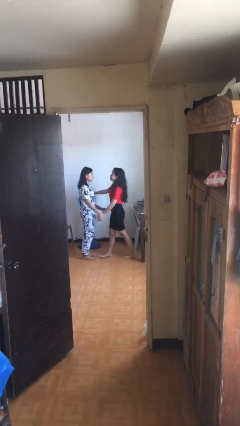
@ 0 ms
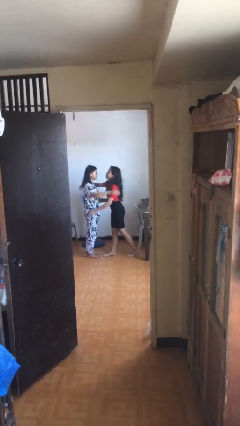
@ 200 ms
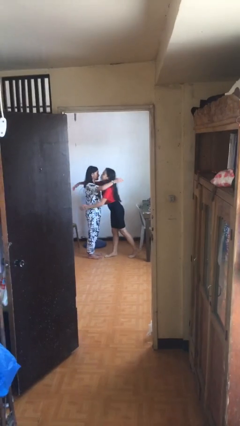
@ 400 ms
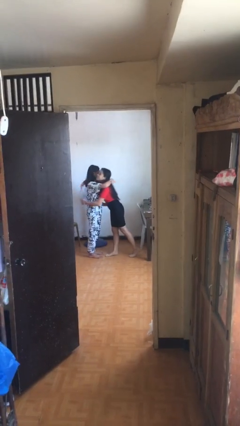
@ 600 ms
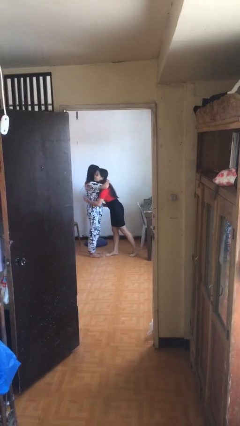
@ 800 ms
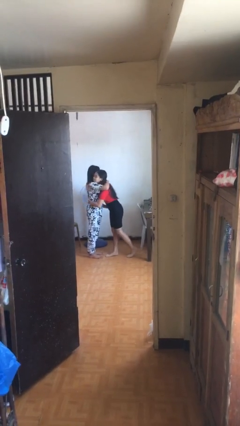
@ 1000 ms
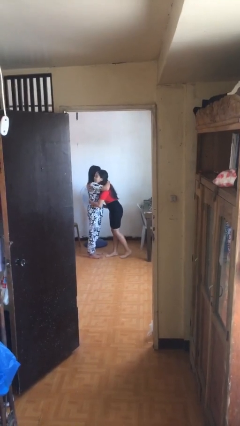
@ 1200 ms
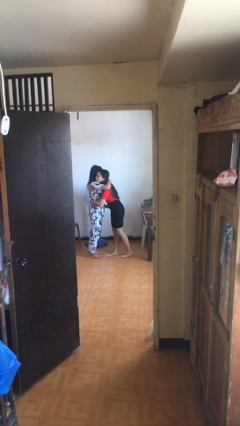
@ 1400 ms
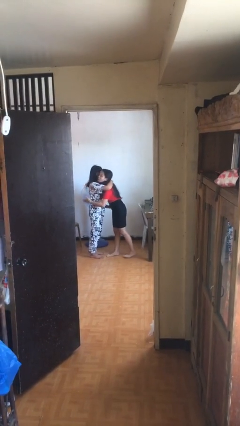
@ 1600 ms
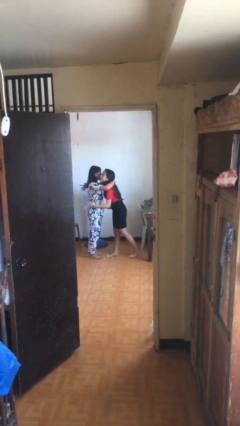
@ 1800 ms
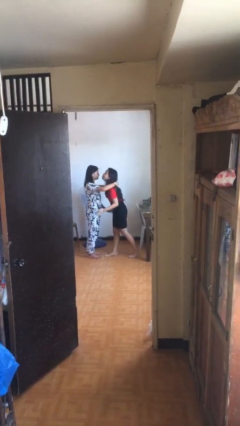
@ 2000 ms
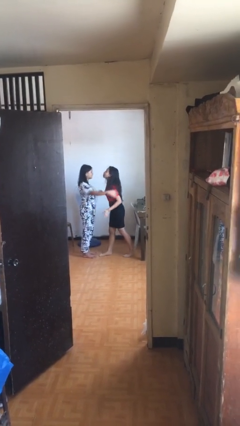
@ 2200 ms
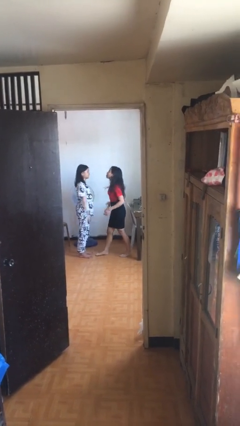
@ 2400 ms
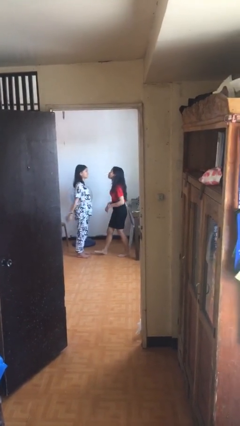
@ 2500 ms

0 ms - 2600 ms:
person embraces person

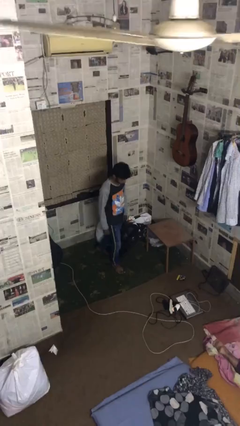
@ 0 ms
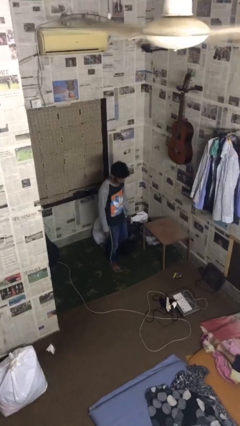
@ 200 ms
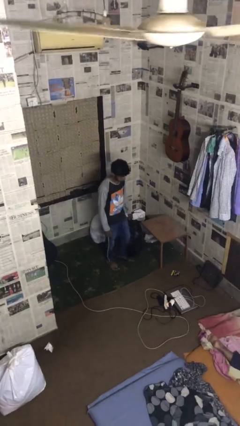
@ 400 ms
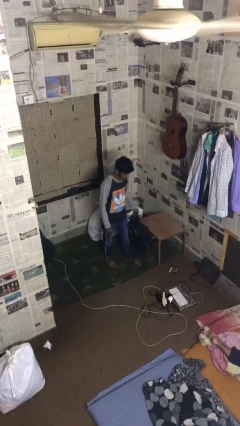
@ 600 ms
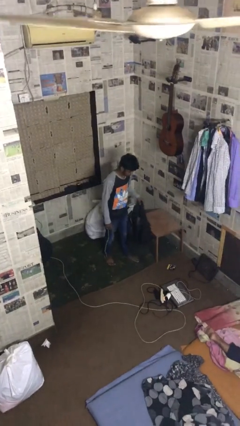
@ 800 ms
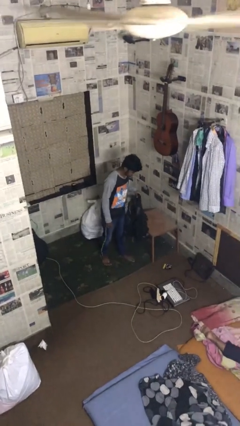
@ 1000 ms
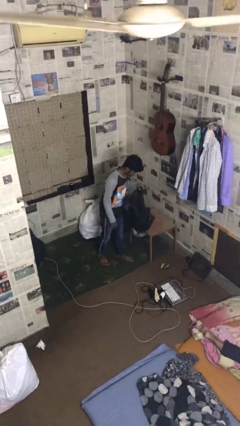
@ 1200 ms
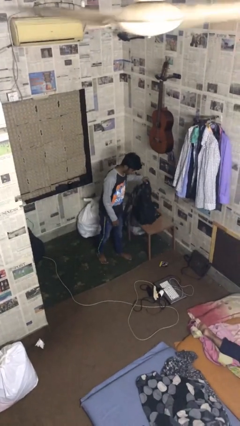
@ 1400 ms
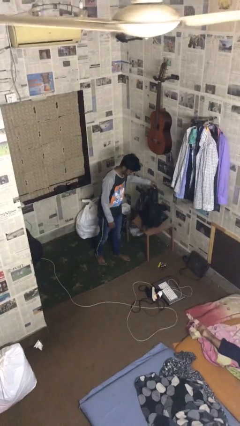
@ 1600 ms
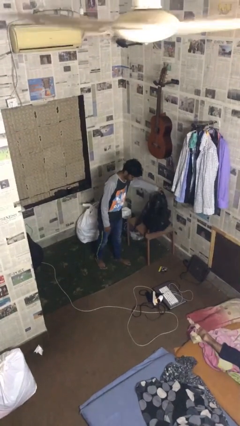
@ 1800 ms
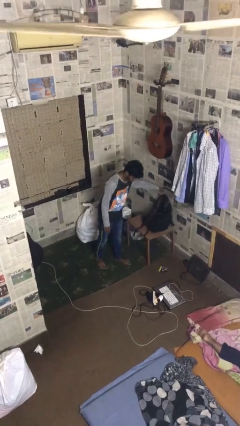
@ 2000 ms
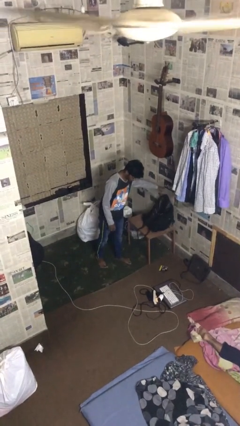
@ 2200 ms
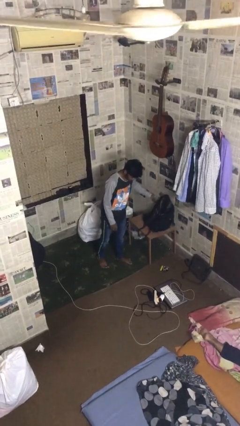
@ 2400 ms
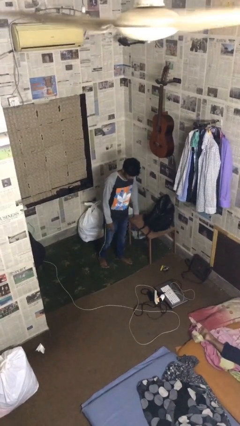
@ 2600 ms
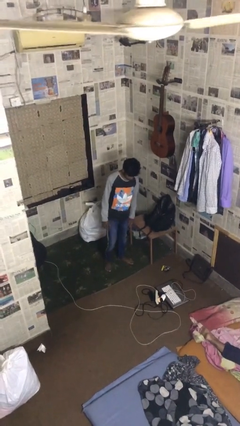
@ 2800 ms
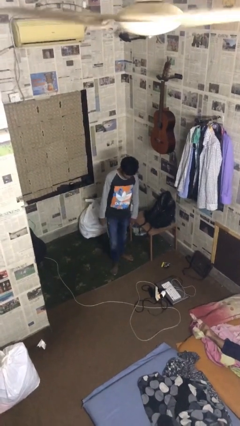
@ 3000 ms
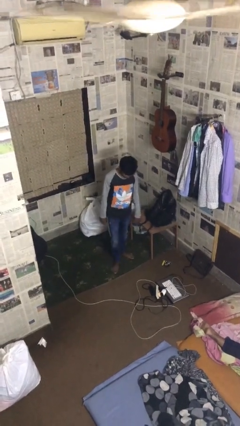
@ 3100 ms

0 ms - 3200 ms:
person puts down object on table

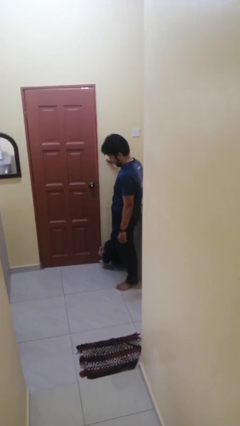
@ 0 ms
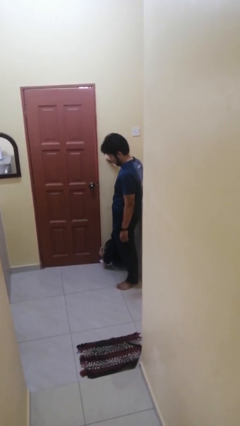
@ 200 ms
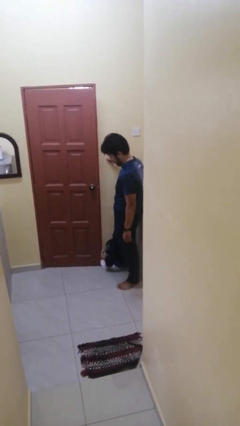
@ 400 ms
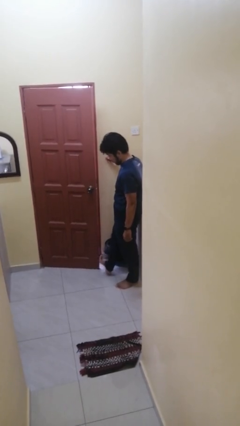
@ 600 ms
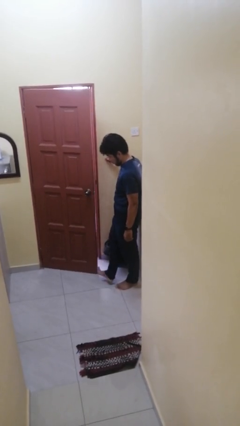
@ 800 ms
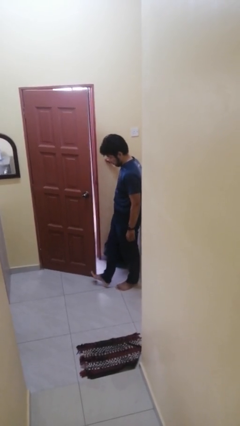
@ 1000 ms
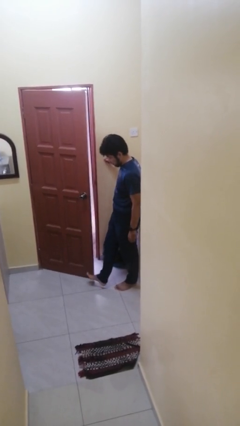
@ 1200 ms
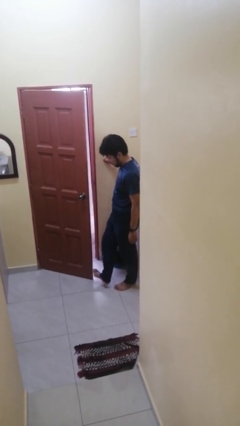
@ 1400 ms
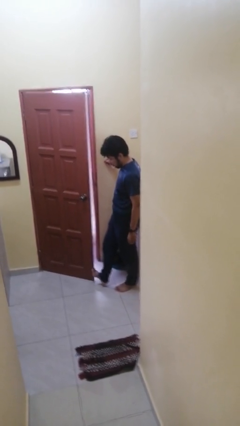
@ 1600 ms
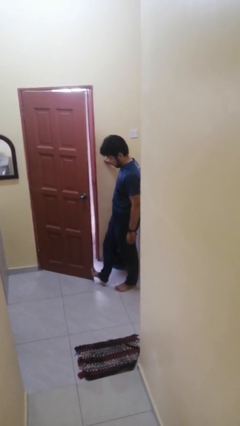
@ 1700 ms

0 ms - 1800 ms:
person opens facility door

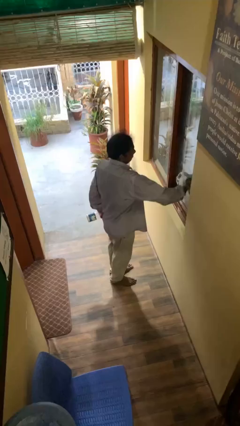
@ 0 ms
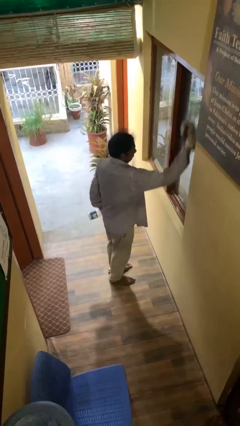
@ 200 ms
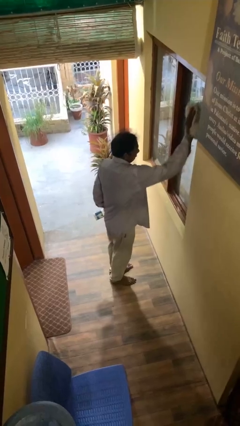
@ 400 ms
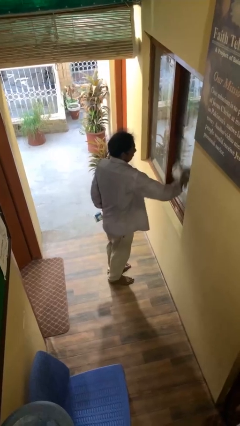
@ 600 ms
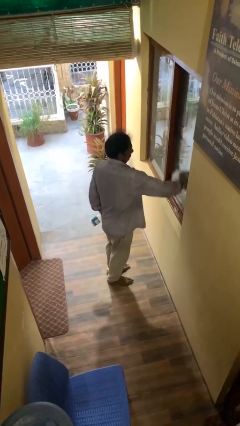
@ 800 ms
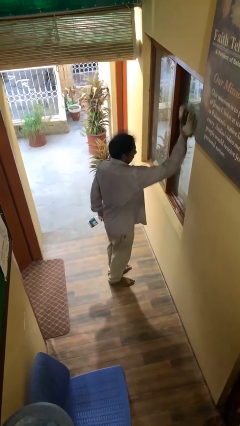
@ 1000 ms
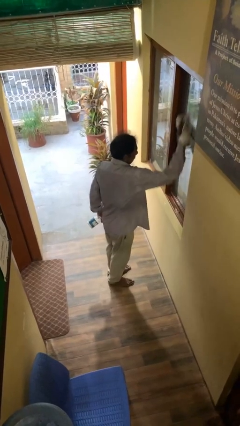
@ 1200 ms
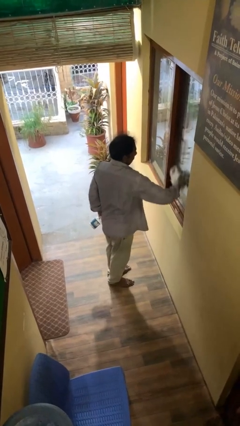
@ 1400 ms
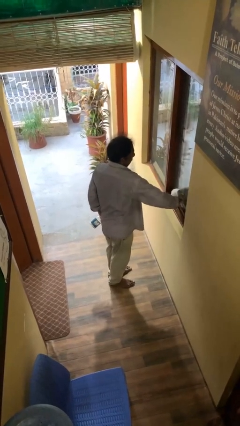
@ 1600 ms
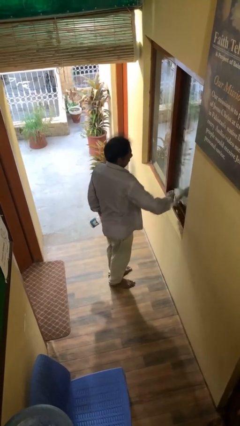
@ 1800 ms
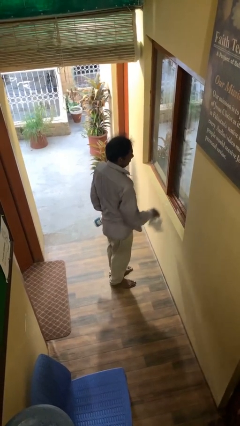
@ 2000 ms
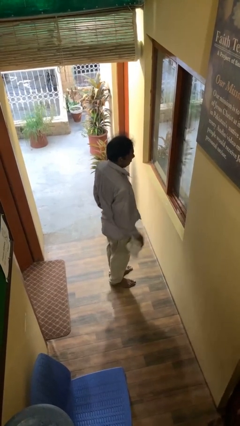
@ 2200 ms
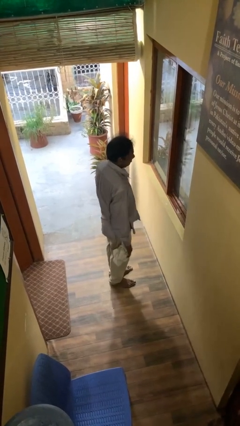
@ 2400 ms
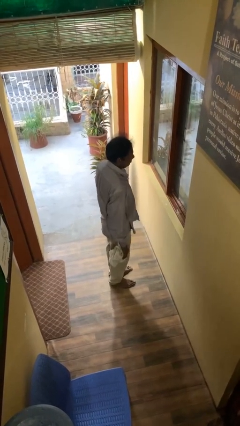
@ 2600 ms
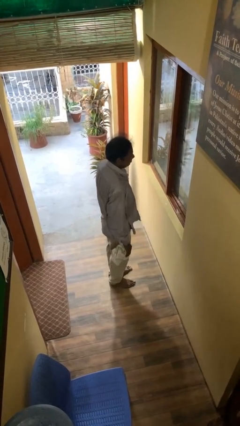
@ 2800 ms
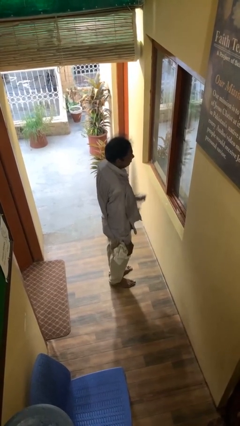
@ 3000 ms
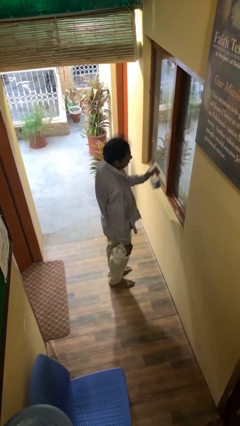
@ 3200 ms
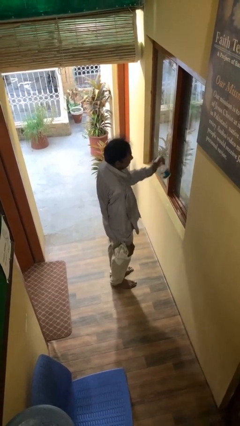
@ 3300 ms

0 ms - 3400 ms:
person washes window

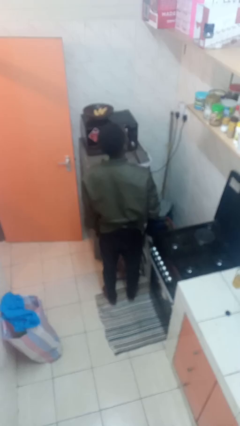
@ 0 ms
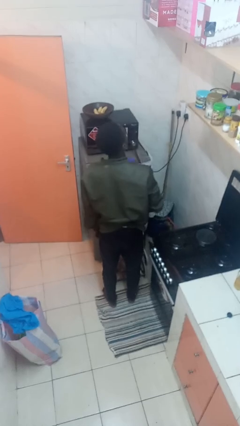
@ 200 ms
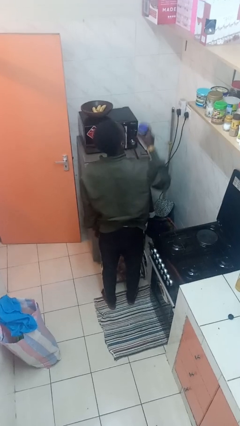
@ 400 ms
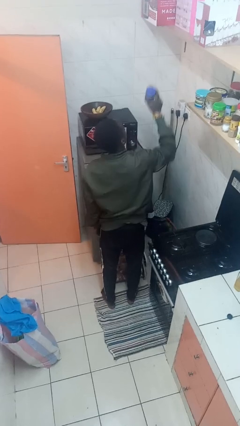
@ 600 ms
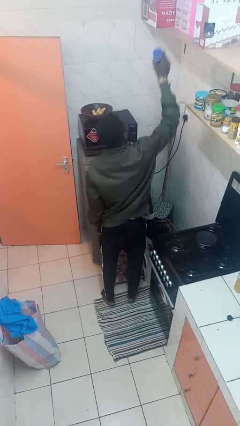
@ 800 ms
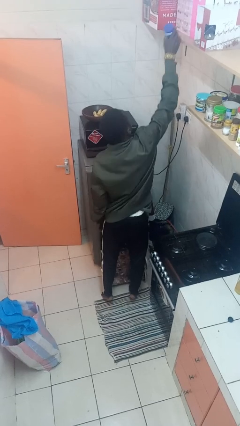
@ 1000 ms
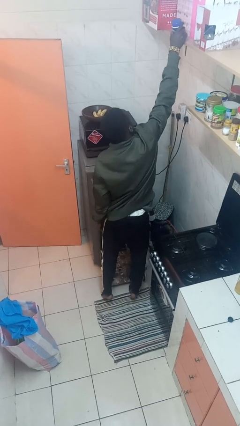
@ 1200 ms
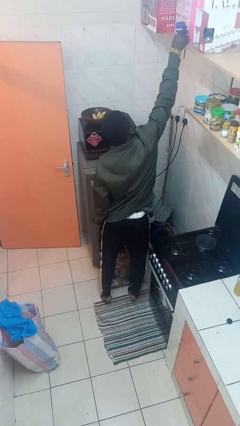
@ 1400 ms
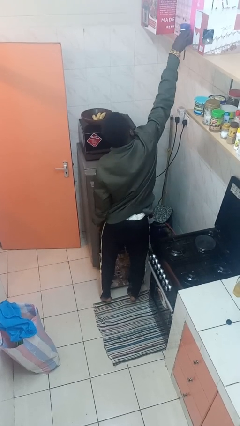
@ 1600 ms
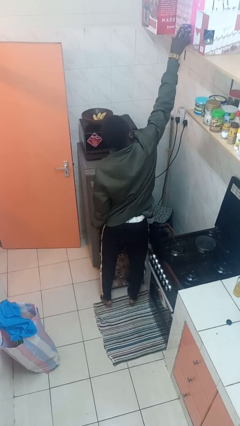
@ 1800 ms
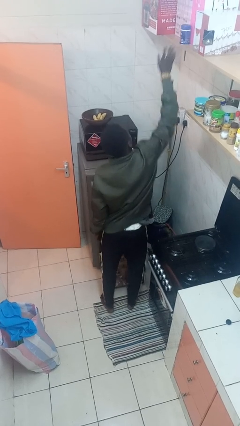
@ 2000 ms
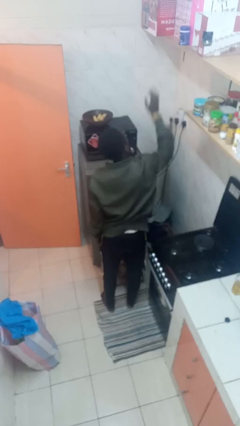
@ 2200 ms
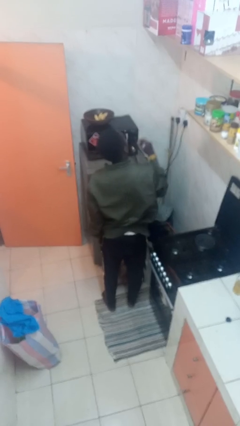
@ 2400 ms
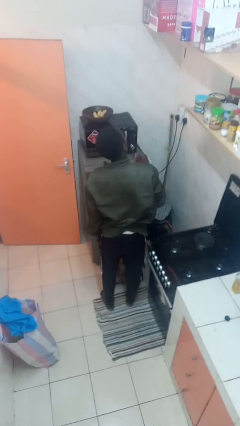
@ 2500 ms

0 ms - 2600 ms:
person puts down object on shelf

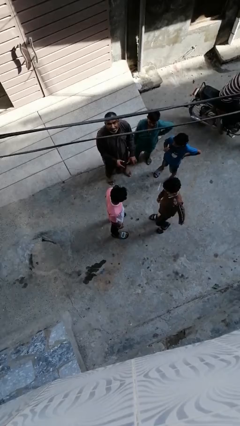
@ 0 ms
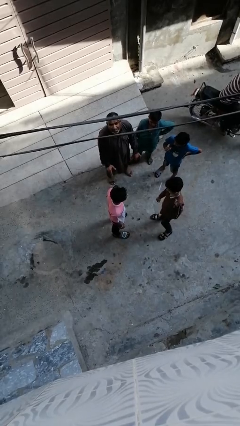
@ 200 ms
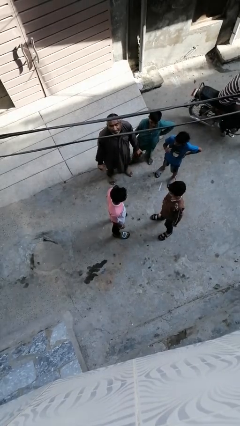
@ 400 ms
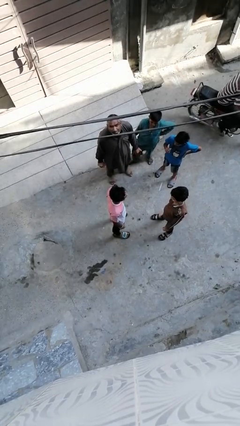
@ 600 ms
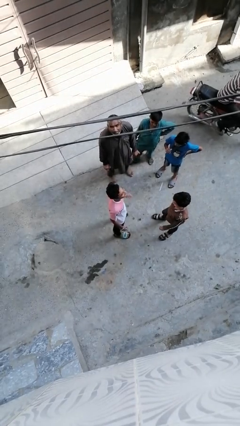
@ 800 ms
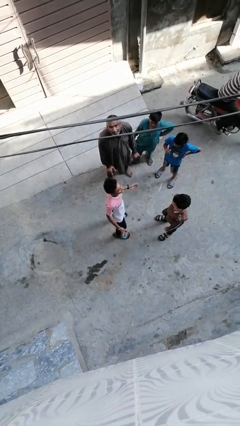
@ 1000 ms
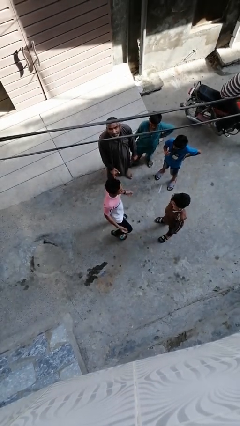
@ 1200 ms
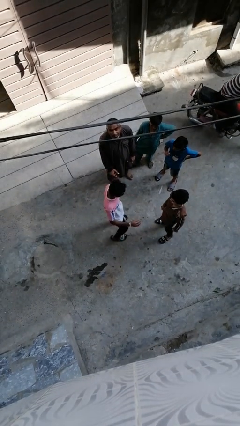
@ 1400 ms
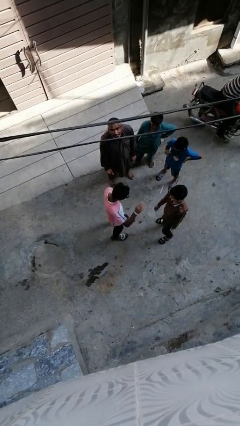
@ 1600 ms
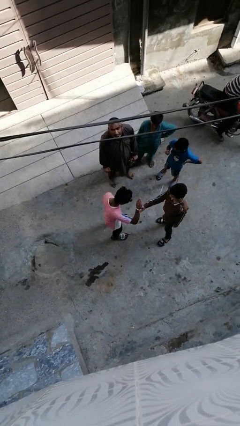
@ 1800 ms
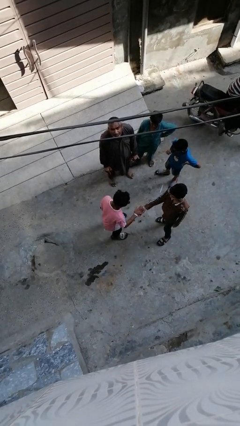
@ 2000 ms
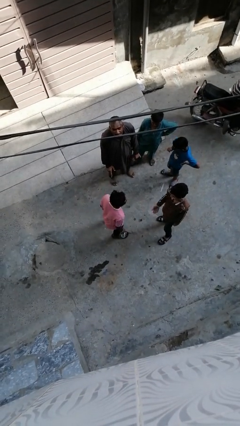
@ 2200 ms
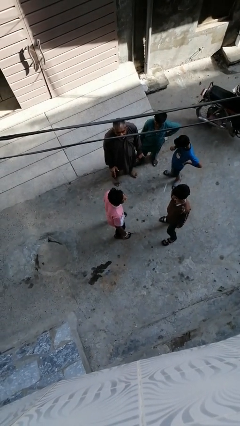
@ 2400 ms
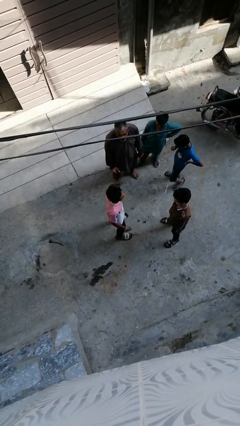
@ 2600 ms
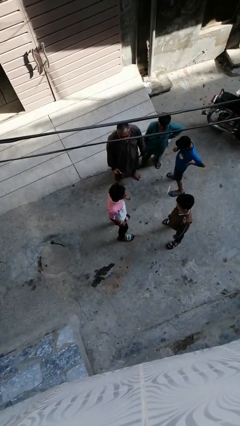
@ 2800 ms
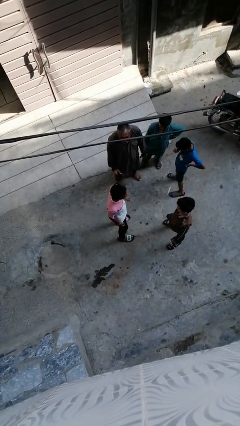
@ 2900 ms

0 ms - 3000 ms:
person laughs with person

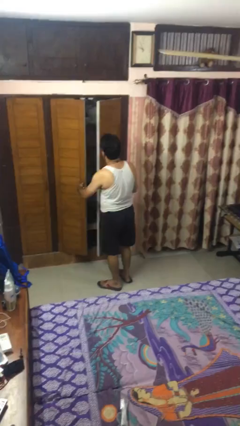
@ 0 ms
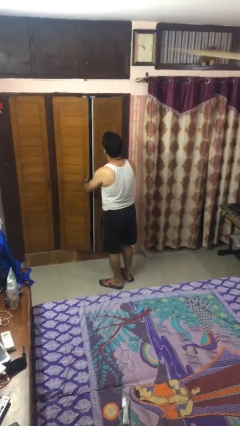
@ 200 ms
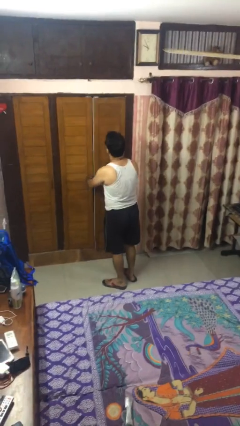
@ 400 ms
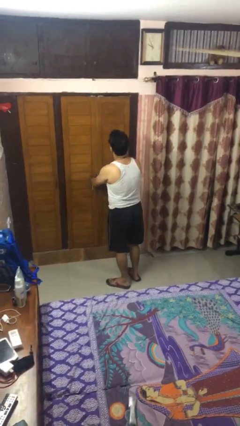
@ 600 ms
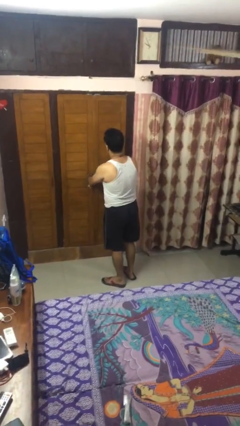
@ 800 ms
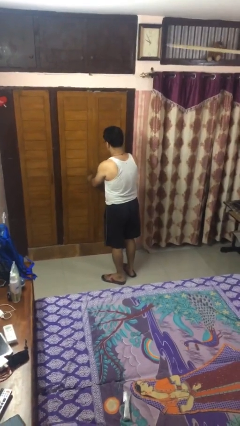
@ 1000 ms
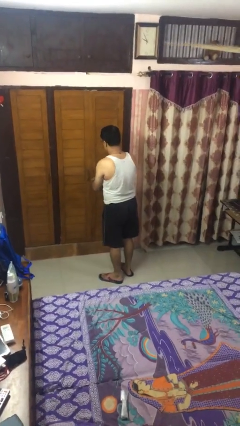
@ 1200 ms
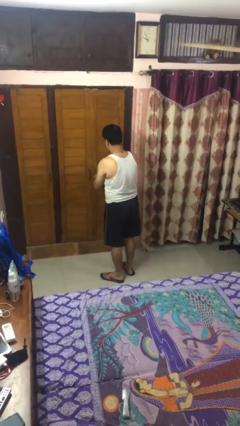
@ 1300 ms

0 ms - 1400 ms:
person closes facility door
